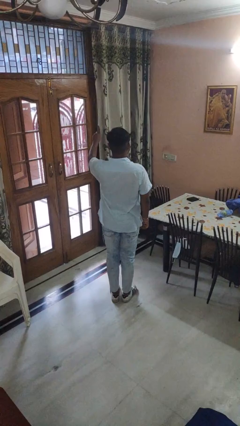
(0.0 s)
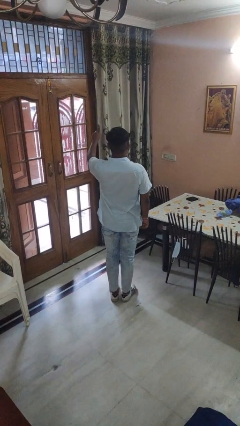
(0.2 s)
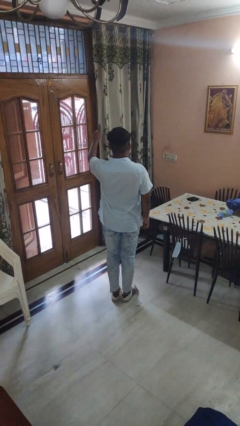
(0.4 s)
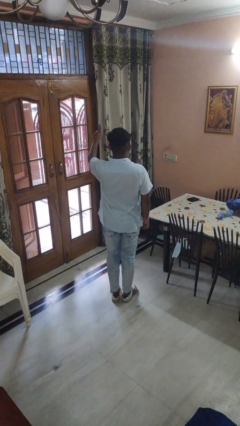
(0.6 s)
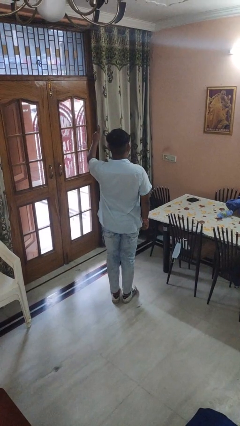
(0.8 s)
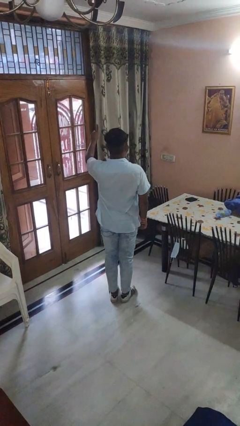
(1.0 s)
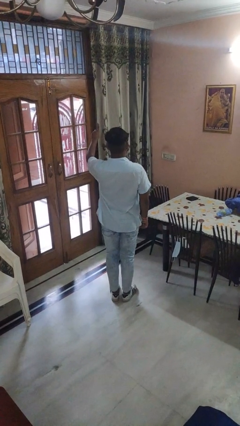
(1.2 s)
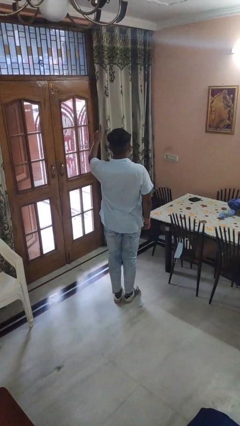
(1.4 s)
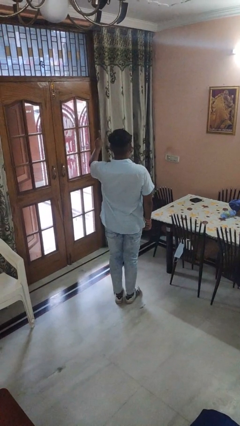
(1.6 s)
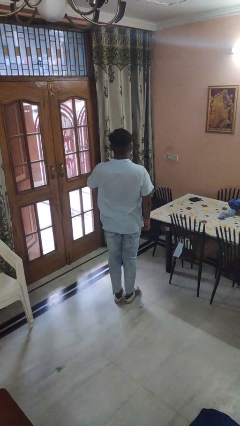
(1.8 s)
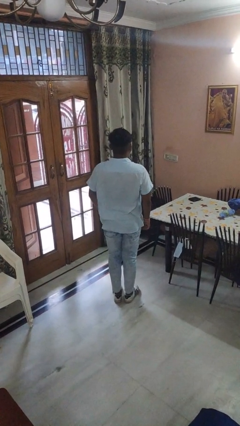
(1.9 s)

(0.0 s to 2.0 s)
person gestures number one

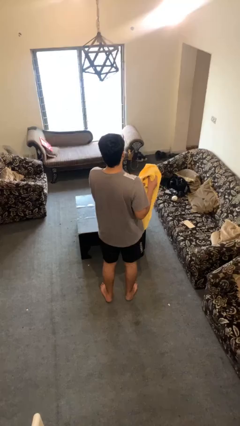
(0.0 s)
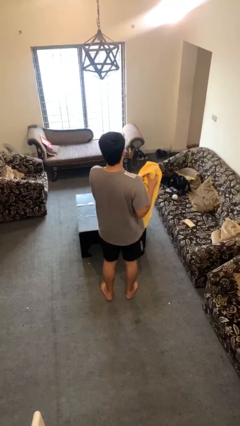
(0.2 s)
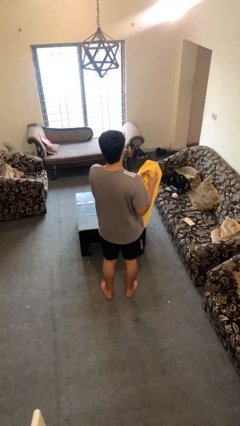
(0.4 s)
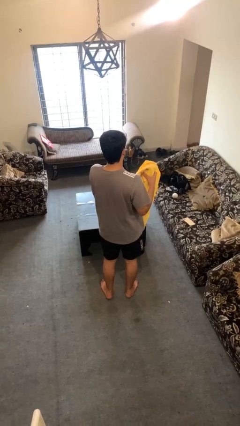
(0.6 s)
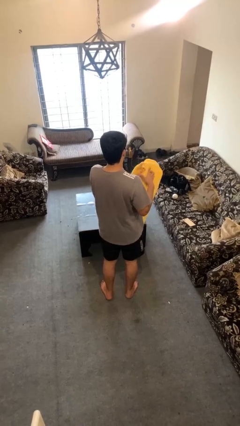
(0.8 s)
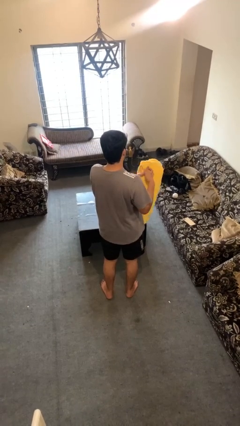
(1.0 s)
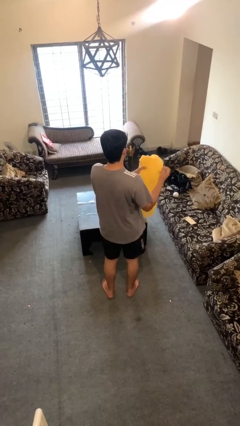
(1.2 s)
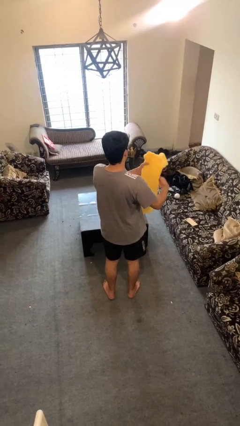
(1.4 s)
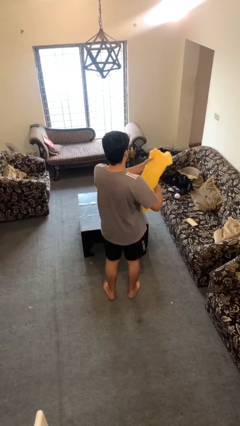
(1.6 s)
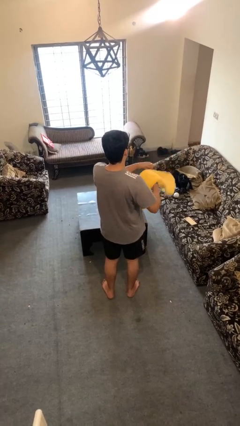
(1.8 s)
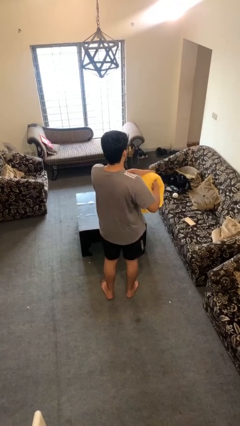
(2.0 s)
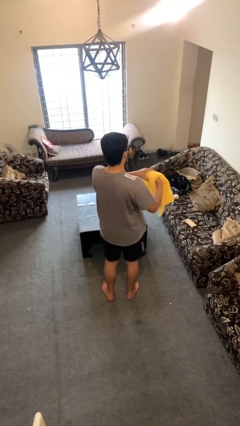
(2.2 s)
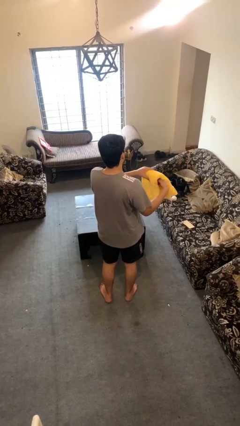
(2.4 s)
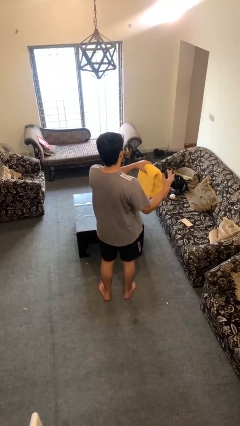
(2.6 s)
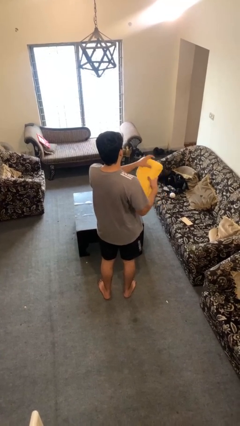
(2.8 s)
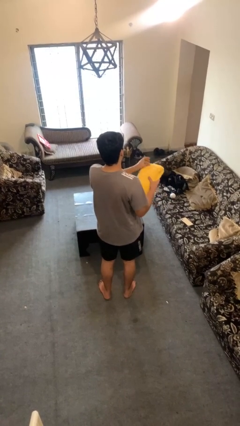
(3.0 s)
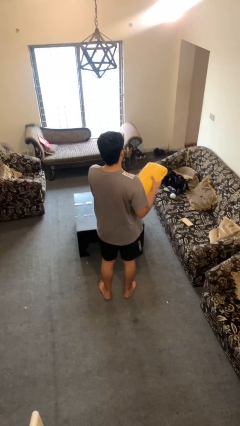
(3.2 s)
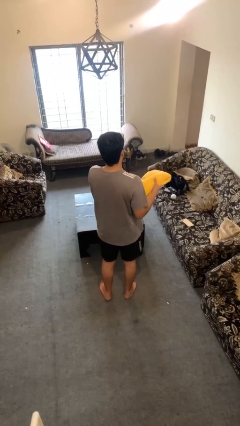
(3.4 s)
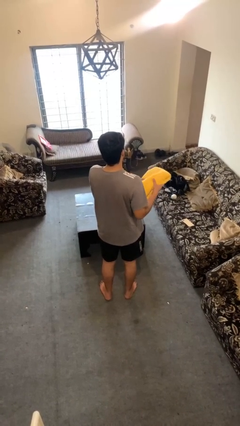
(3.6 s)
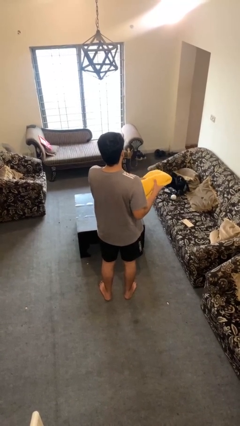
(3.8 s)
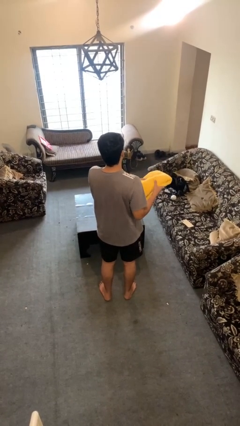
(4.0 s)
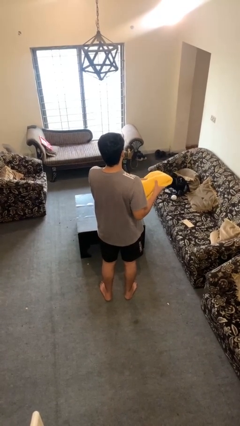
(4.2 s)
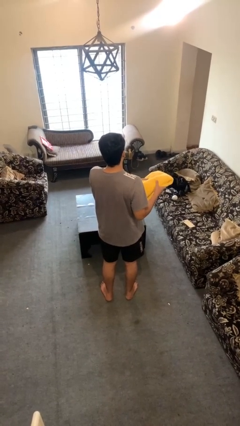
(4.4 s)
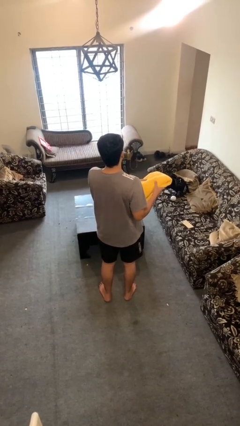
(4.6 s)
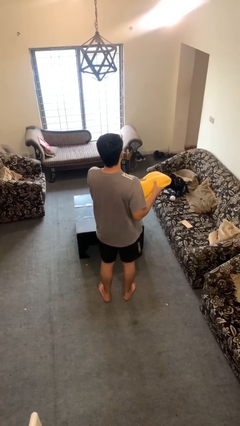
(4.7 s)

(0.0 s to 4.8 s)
person folds towel

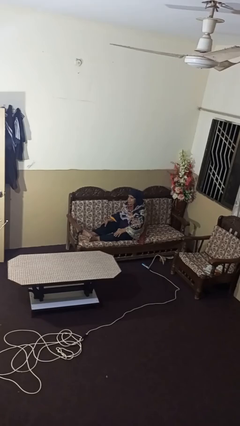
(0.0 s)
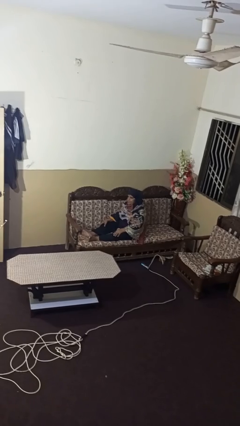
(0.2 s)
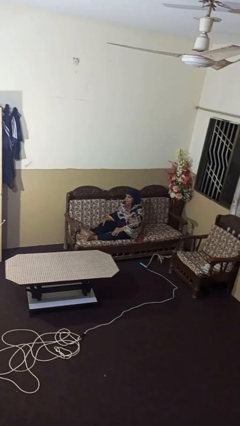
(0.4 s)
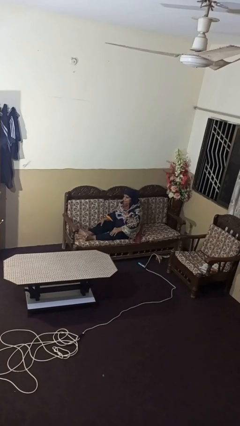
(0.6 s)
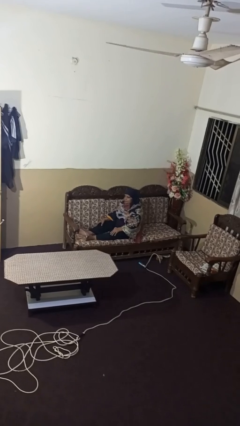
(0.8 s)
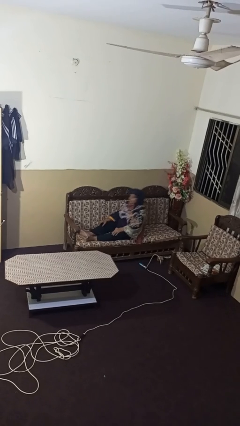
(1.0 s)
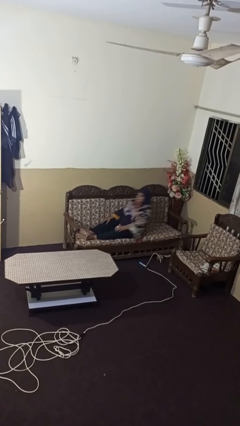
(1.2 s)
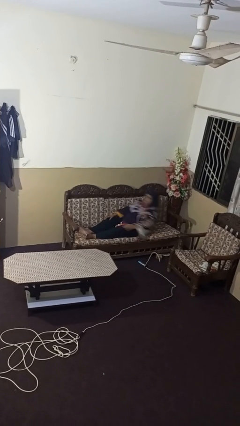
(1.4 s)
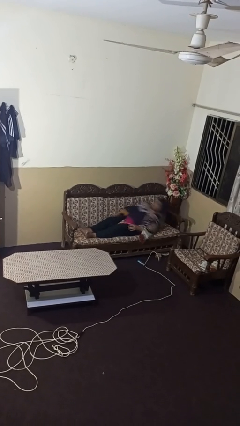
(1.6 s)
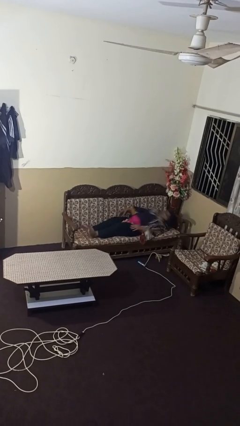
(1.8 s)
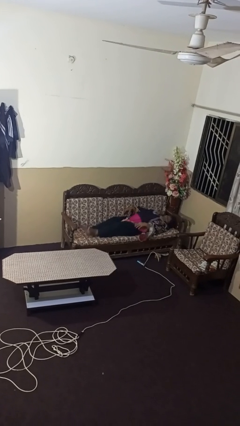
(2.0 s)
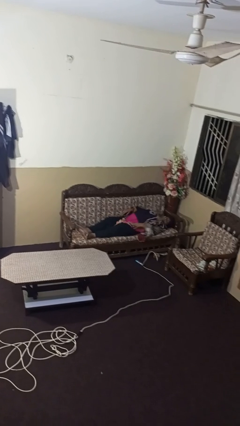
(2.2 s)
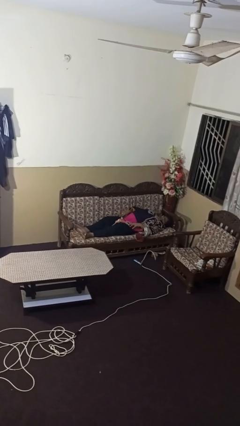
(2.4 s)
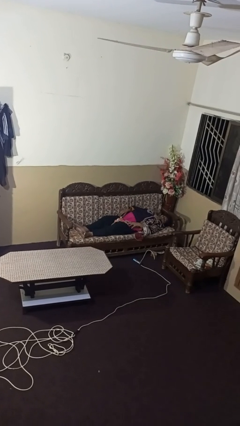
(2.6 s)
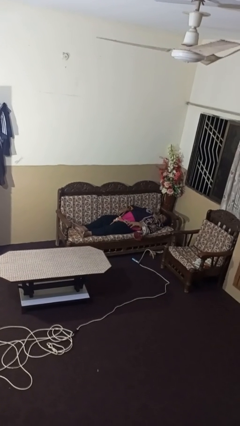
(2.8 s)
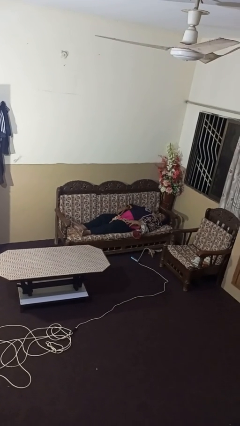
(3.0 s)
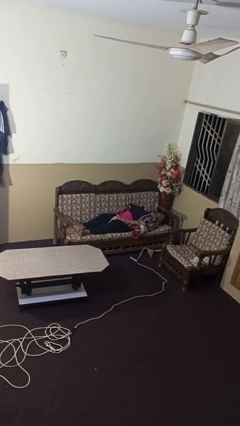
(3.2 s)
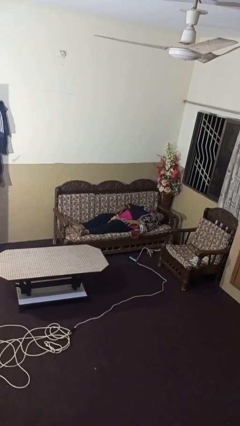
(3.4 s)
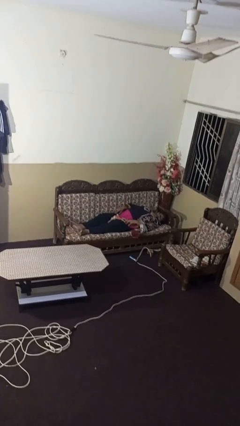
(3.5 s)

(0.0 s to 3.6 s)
person lies down on couch

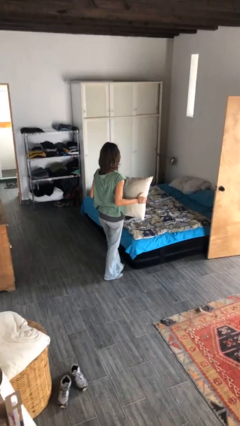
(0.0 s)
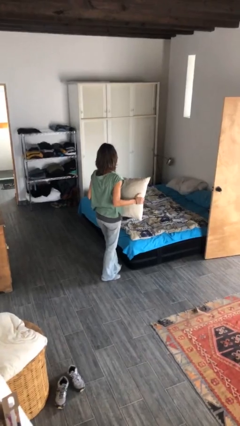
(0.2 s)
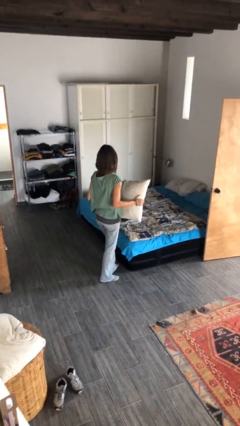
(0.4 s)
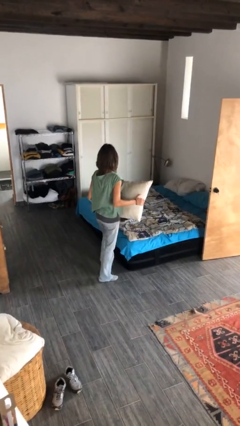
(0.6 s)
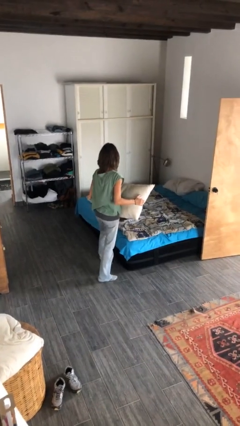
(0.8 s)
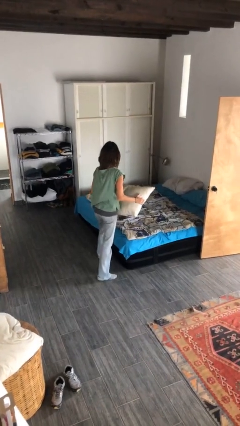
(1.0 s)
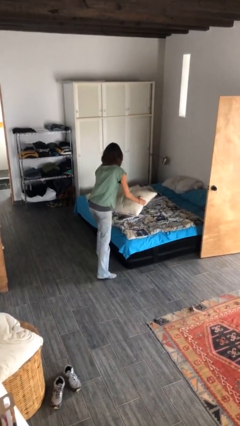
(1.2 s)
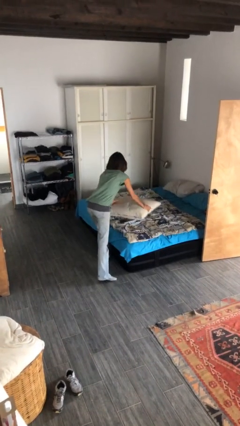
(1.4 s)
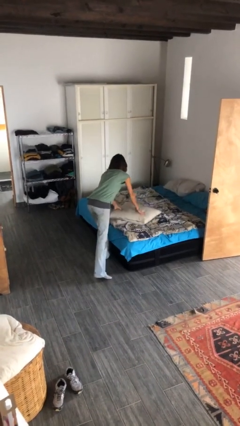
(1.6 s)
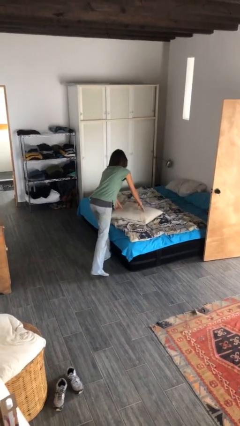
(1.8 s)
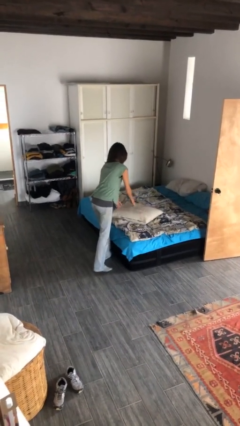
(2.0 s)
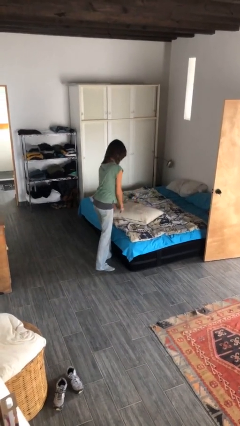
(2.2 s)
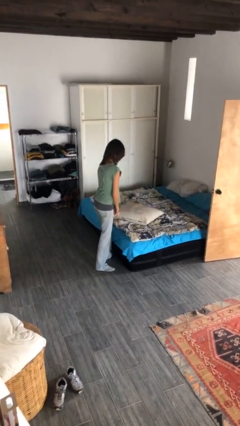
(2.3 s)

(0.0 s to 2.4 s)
person puts down object on bed

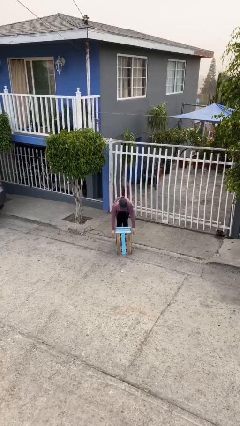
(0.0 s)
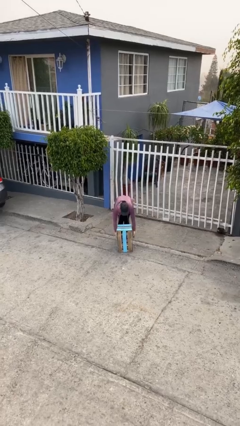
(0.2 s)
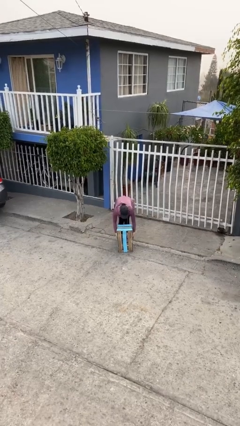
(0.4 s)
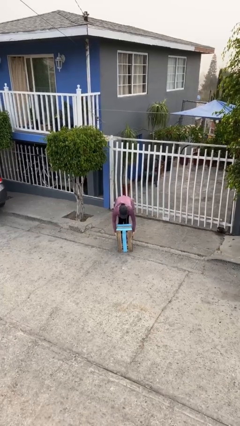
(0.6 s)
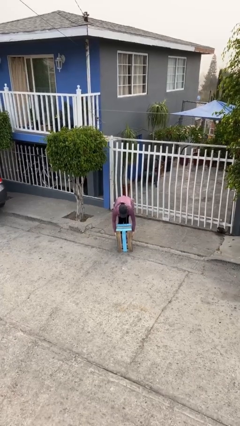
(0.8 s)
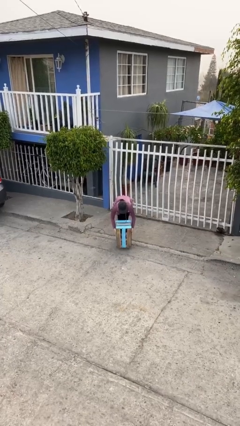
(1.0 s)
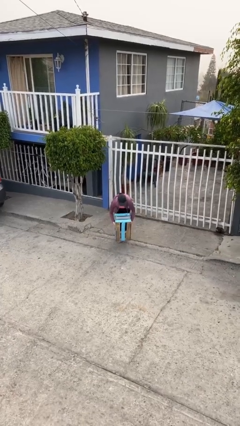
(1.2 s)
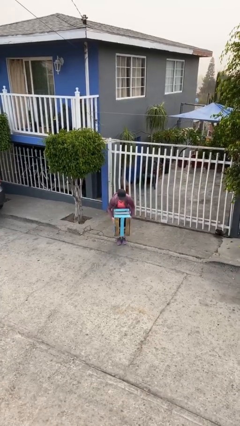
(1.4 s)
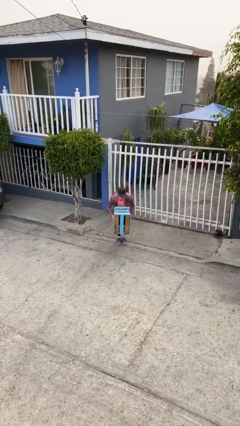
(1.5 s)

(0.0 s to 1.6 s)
person picks up object from floor

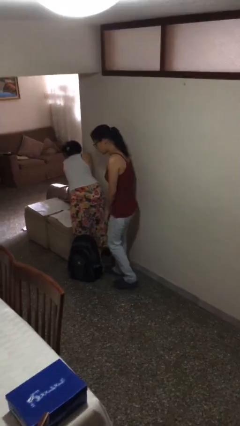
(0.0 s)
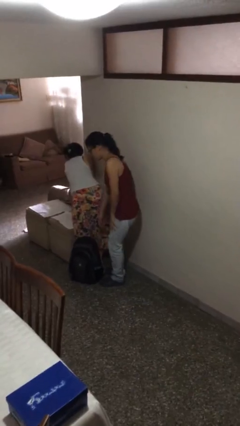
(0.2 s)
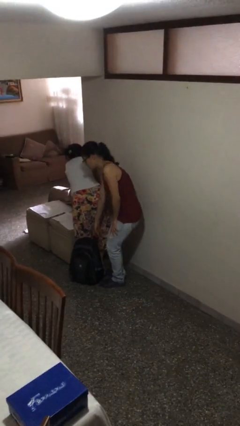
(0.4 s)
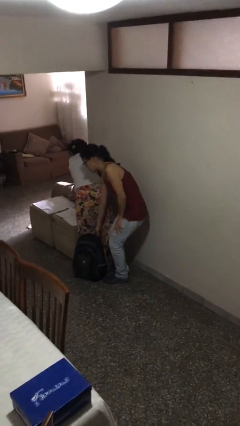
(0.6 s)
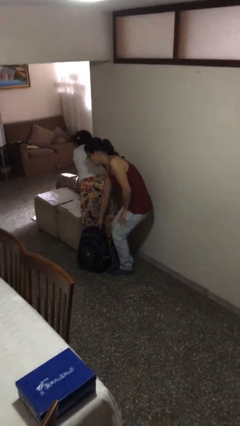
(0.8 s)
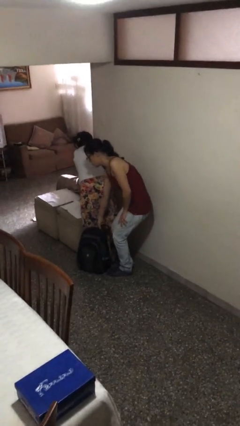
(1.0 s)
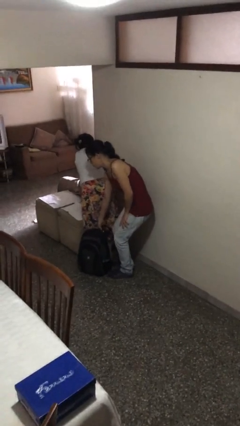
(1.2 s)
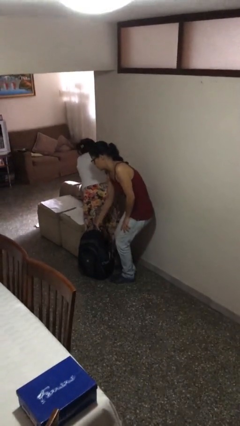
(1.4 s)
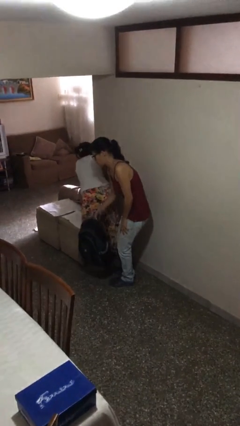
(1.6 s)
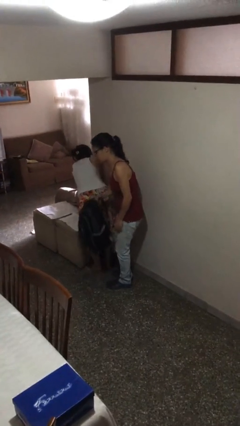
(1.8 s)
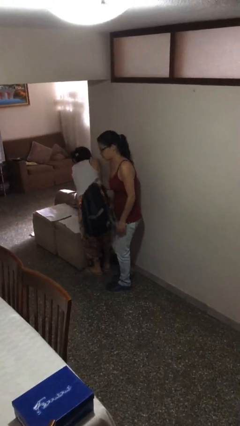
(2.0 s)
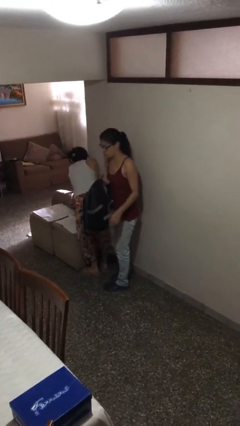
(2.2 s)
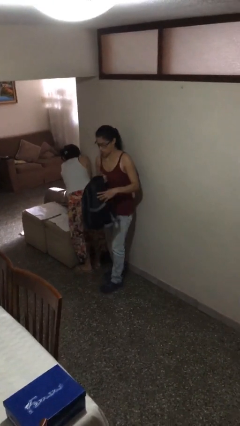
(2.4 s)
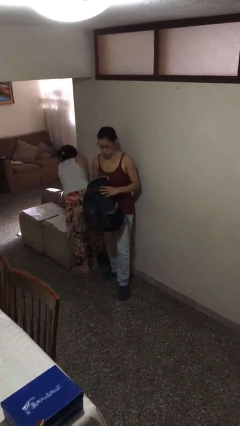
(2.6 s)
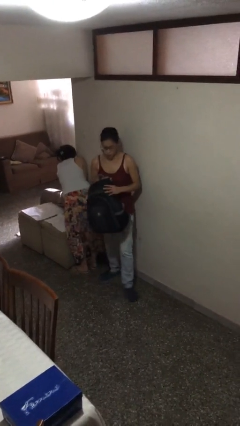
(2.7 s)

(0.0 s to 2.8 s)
person steals object from person
